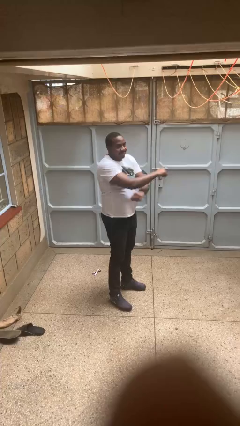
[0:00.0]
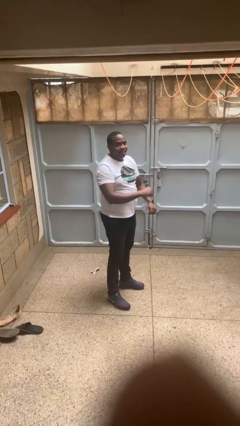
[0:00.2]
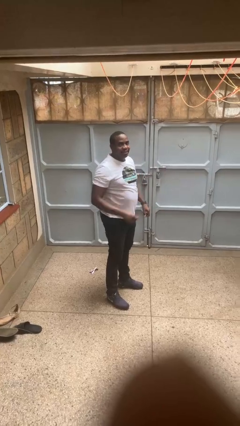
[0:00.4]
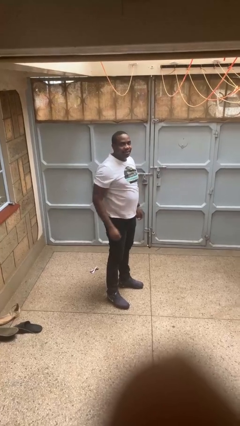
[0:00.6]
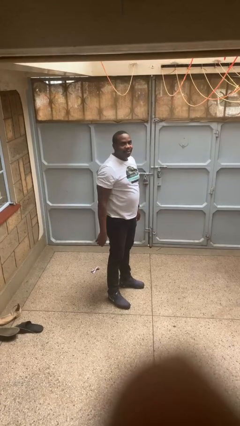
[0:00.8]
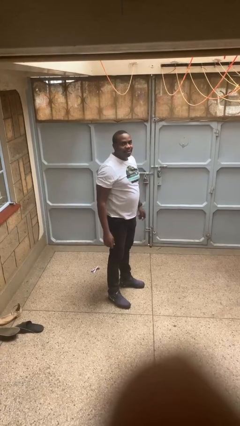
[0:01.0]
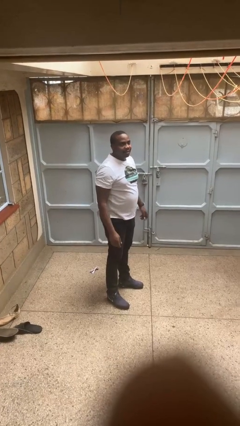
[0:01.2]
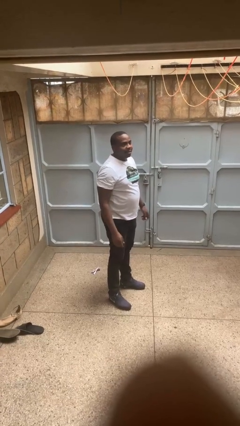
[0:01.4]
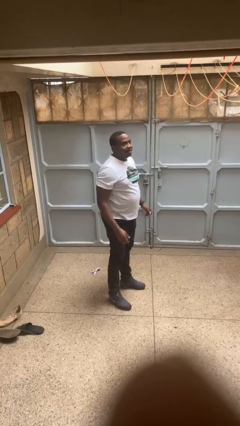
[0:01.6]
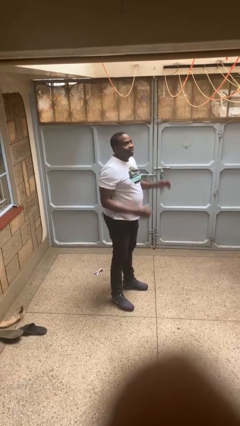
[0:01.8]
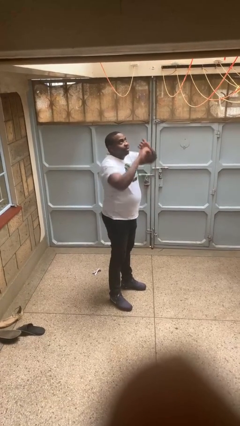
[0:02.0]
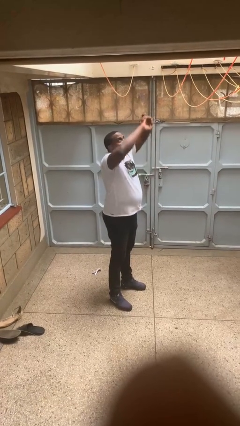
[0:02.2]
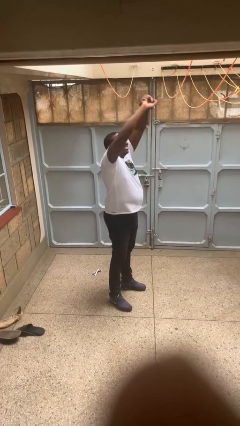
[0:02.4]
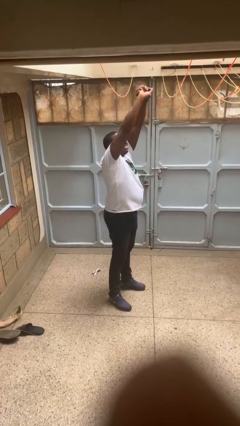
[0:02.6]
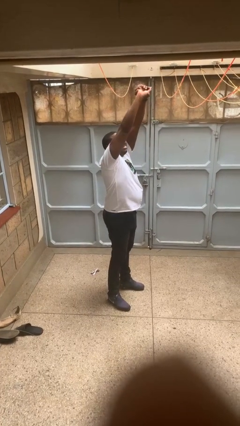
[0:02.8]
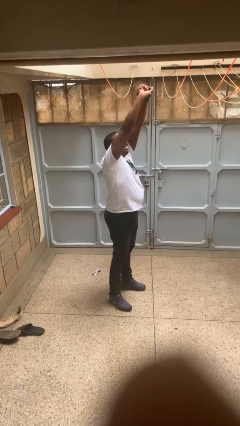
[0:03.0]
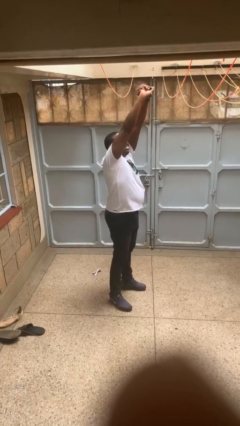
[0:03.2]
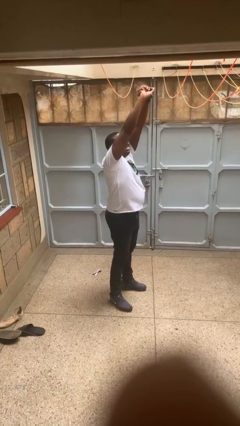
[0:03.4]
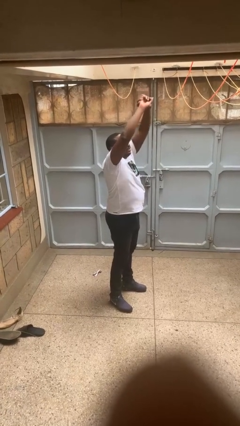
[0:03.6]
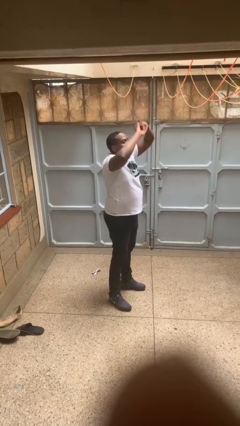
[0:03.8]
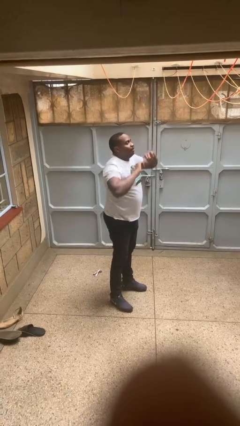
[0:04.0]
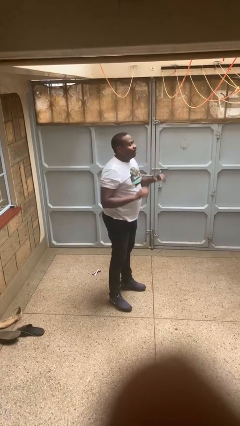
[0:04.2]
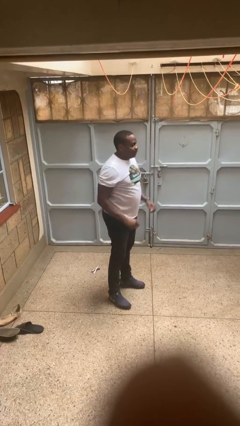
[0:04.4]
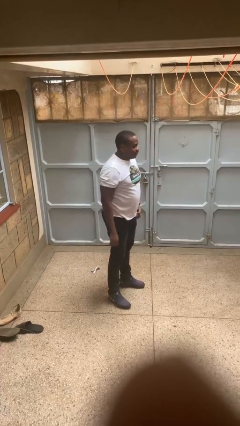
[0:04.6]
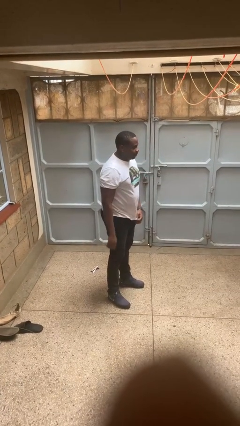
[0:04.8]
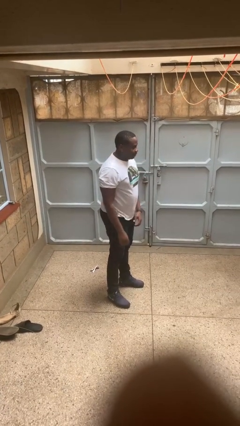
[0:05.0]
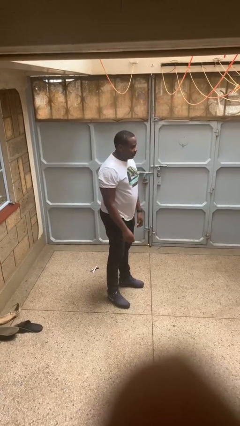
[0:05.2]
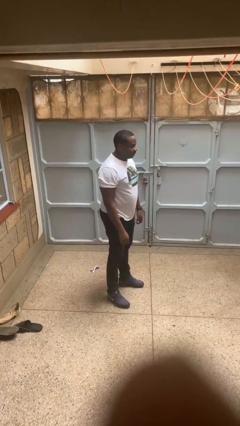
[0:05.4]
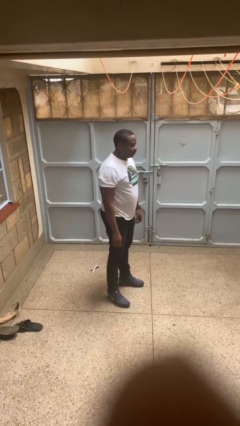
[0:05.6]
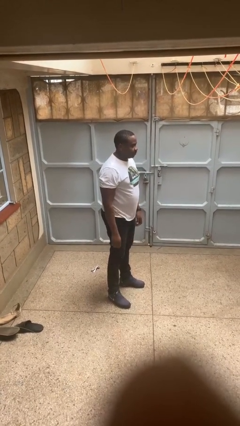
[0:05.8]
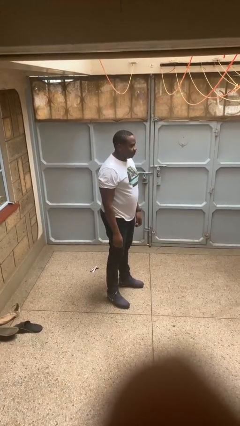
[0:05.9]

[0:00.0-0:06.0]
person stretches arms over head

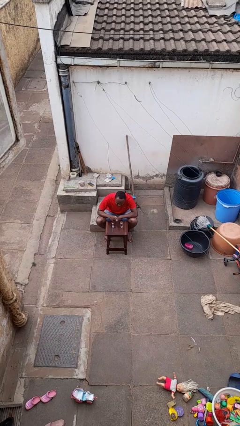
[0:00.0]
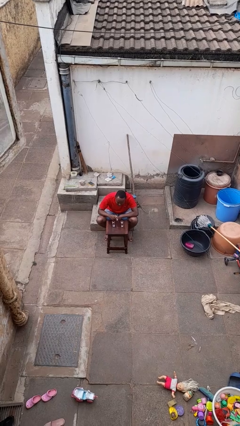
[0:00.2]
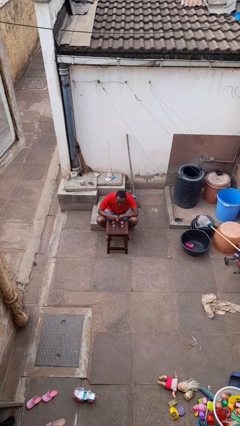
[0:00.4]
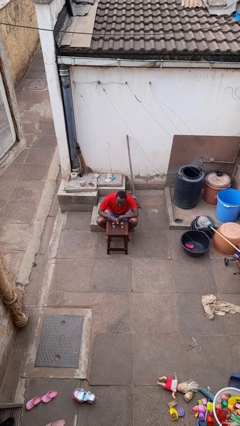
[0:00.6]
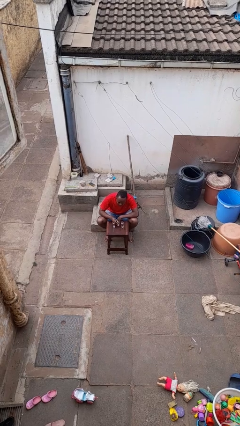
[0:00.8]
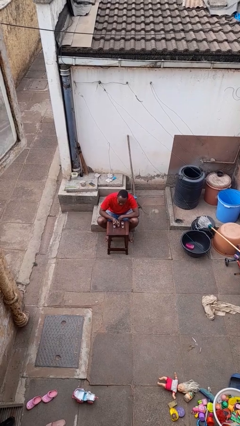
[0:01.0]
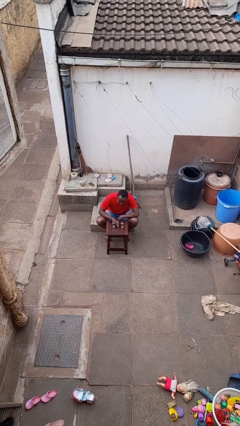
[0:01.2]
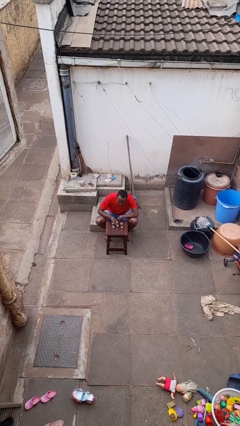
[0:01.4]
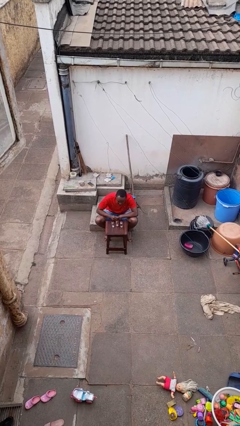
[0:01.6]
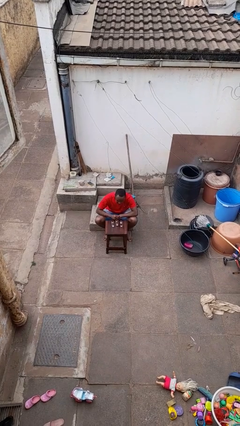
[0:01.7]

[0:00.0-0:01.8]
person puts down object on table

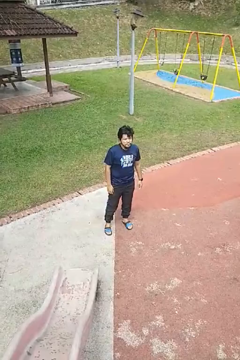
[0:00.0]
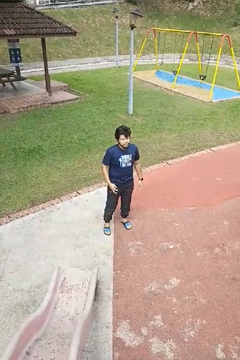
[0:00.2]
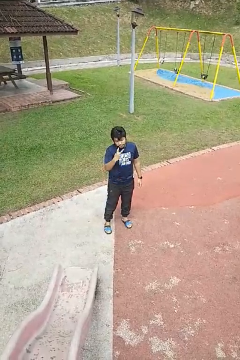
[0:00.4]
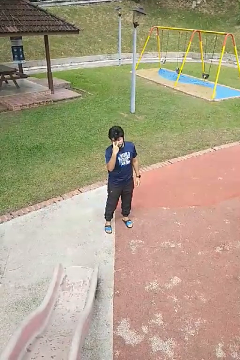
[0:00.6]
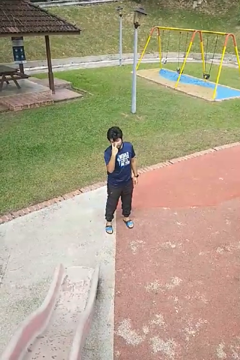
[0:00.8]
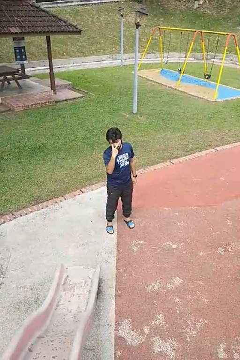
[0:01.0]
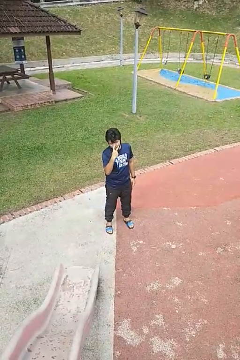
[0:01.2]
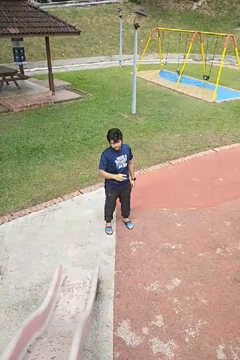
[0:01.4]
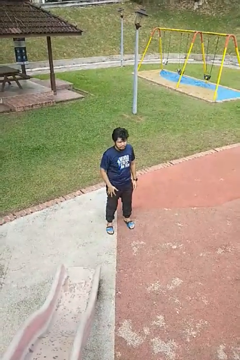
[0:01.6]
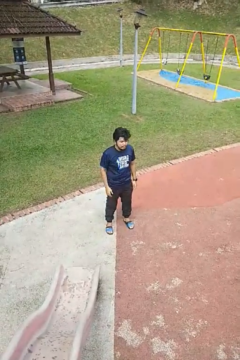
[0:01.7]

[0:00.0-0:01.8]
person gestures watch closely

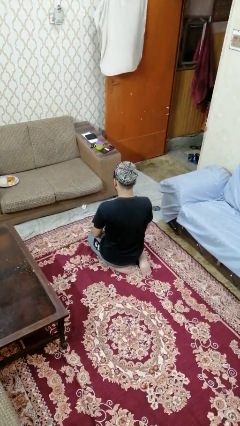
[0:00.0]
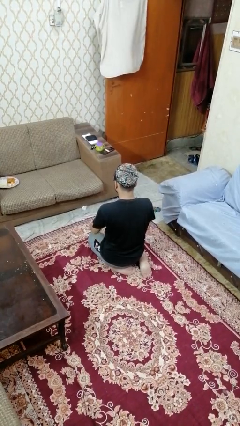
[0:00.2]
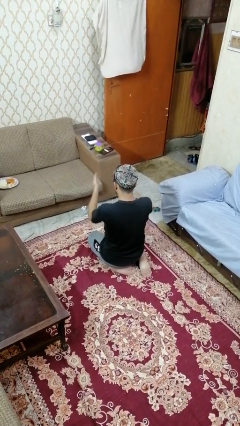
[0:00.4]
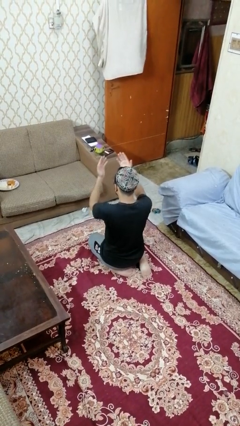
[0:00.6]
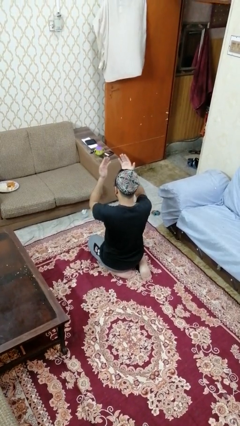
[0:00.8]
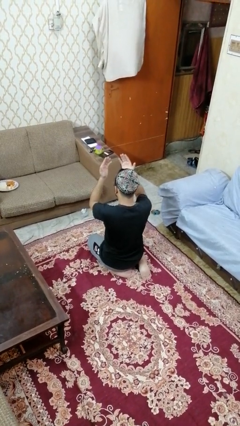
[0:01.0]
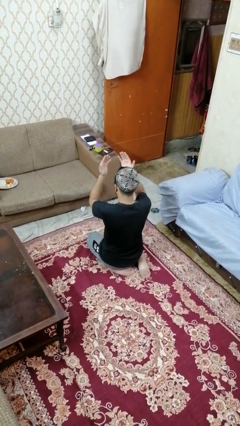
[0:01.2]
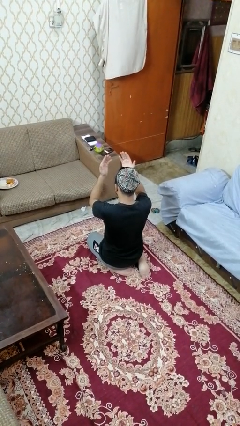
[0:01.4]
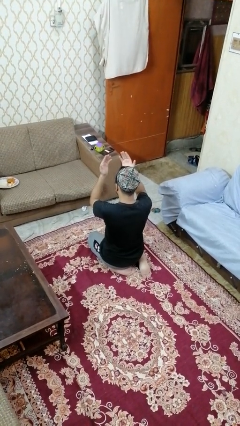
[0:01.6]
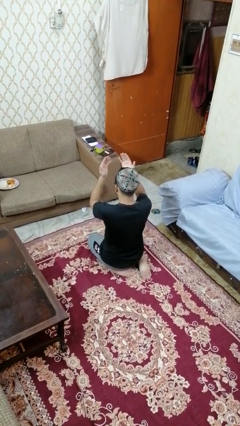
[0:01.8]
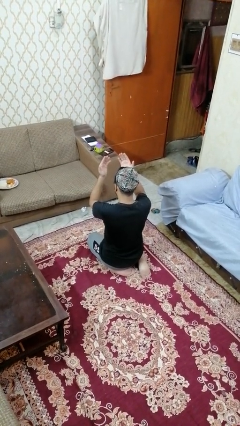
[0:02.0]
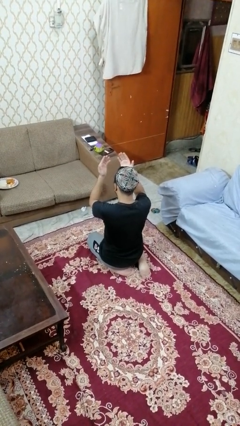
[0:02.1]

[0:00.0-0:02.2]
person prays

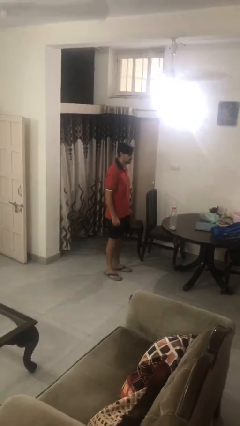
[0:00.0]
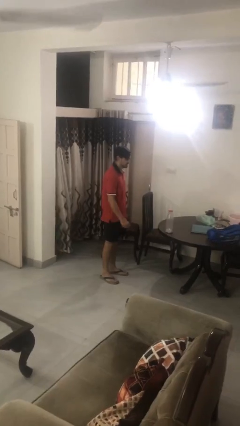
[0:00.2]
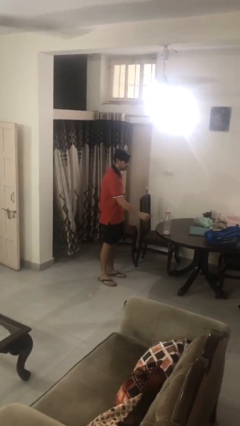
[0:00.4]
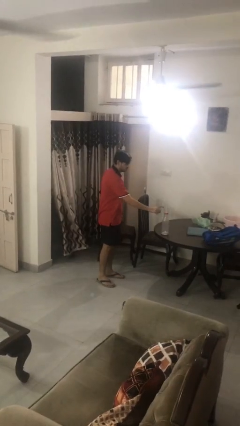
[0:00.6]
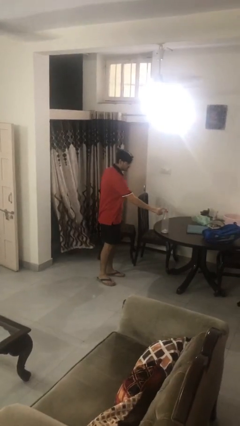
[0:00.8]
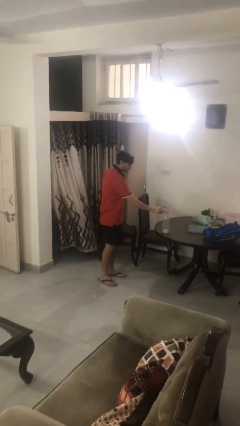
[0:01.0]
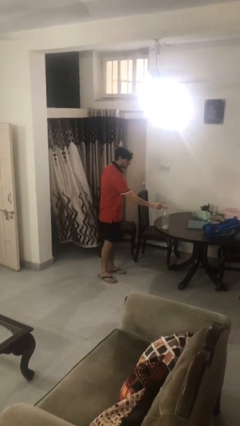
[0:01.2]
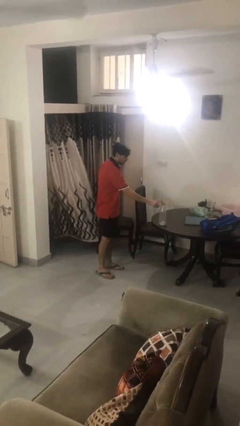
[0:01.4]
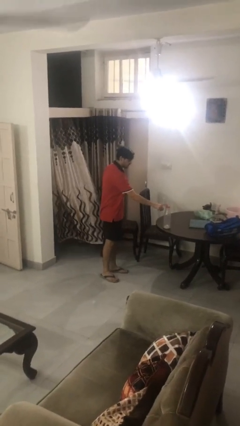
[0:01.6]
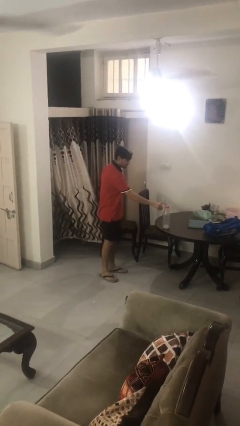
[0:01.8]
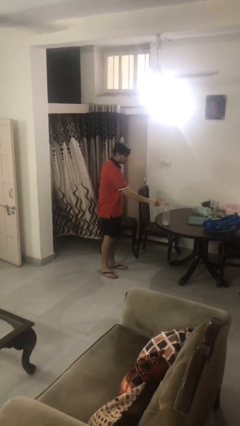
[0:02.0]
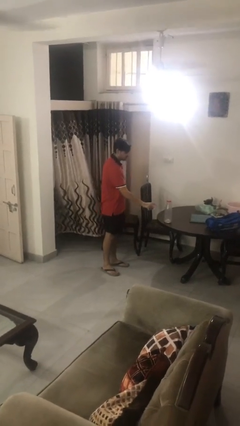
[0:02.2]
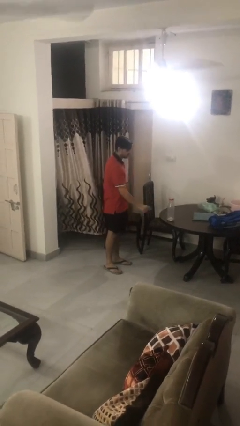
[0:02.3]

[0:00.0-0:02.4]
person taps object with finger

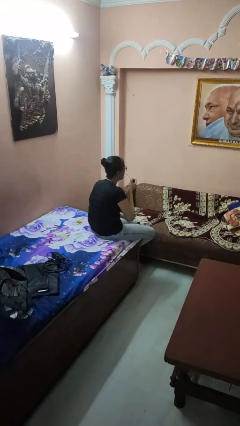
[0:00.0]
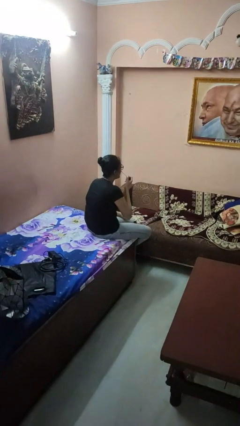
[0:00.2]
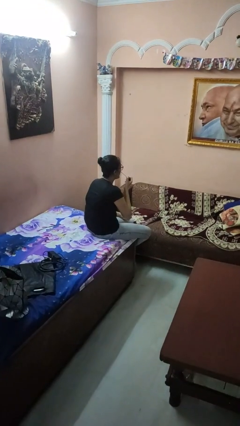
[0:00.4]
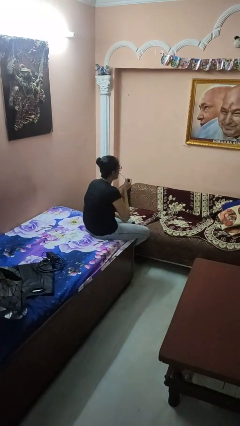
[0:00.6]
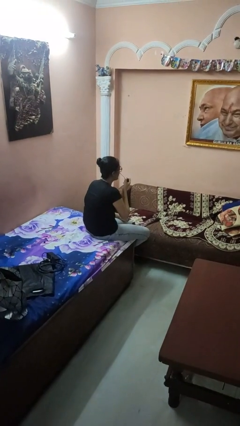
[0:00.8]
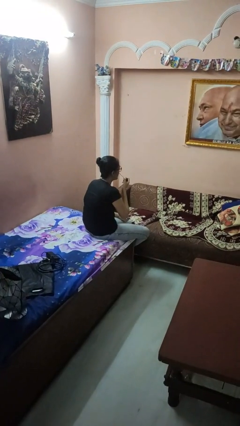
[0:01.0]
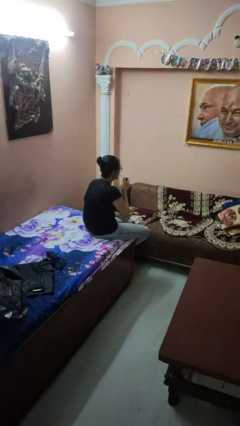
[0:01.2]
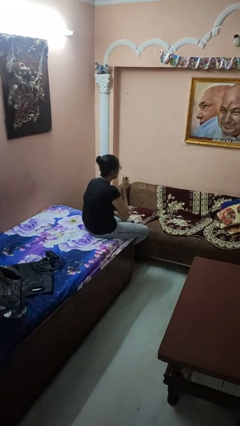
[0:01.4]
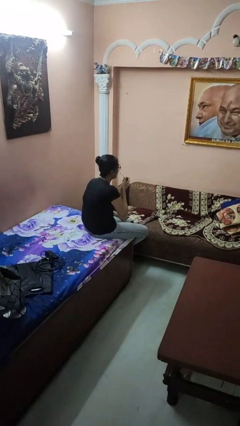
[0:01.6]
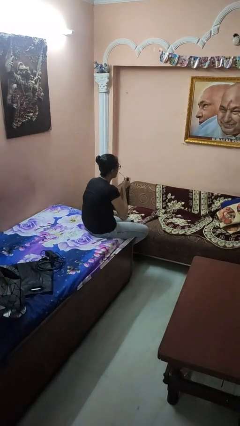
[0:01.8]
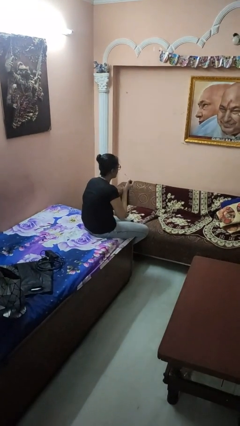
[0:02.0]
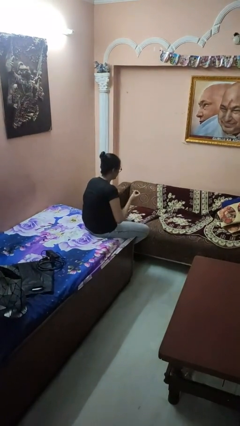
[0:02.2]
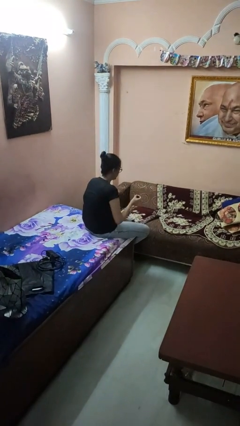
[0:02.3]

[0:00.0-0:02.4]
person applies lip makeup

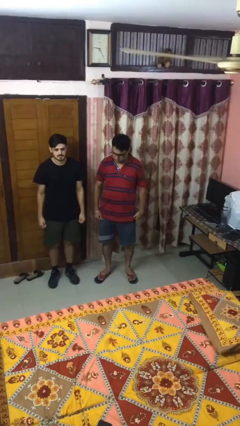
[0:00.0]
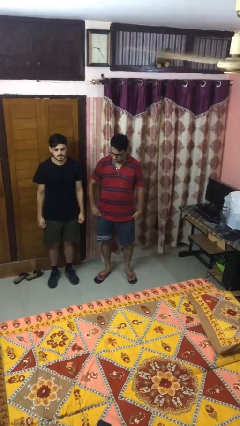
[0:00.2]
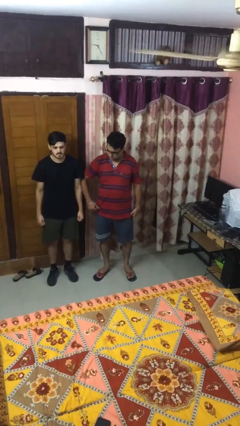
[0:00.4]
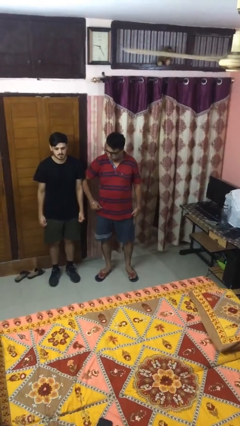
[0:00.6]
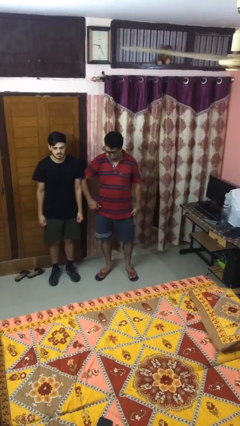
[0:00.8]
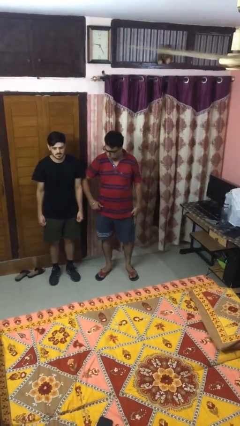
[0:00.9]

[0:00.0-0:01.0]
person nudges person with elbow
